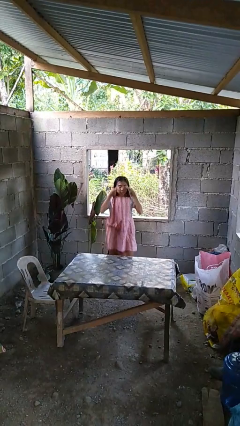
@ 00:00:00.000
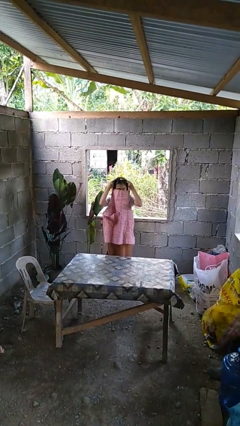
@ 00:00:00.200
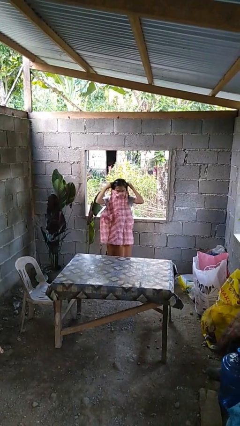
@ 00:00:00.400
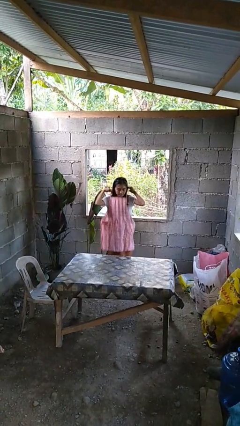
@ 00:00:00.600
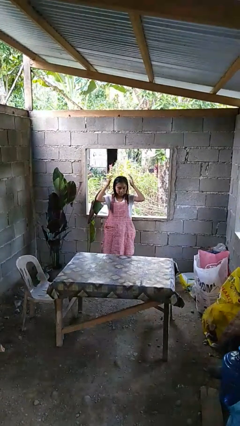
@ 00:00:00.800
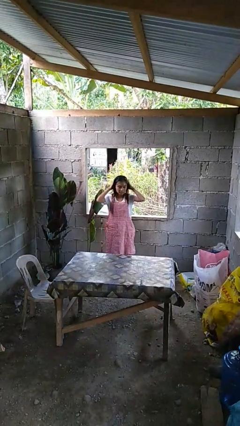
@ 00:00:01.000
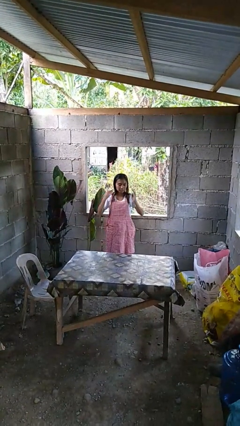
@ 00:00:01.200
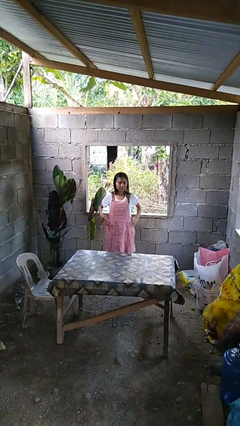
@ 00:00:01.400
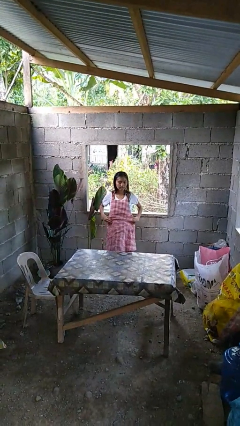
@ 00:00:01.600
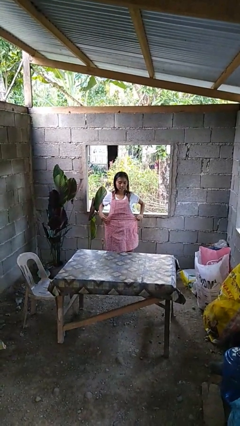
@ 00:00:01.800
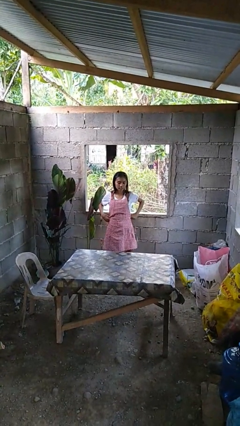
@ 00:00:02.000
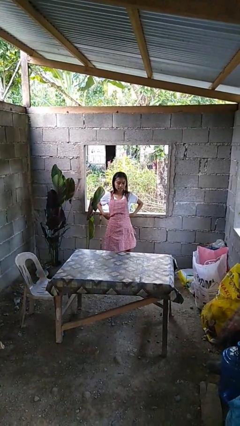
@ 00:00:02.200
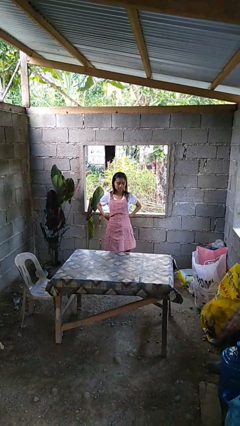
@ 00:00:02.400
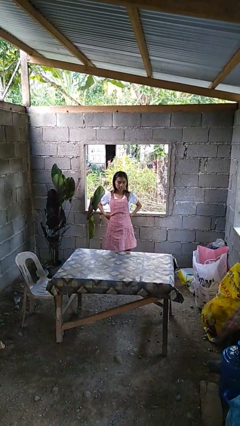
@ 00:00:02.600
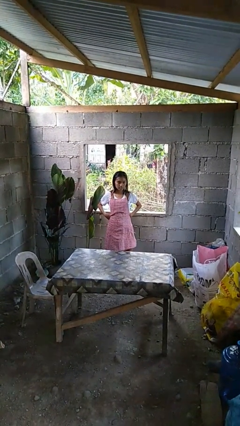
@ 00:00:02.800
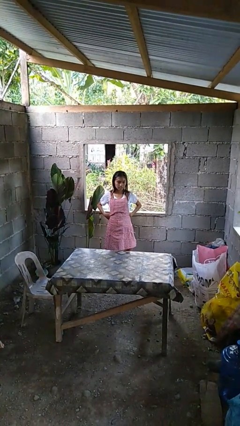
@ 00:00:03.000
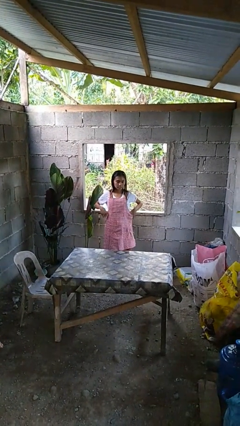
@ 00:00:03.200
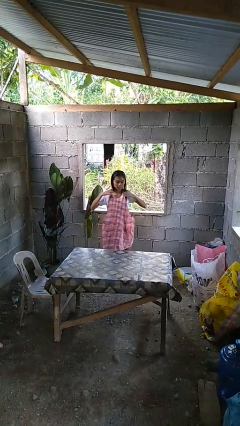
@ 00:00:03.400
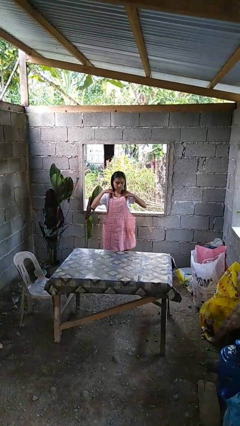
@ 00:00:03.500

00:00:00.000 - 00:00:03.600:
person puts on apron

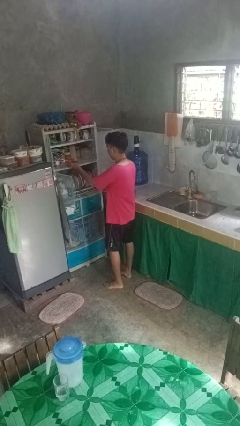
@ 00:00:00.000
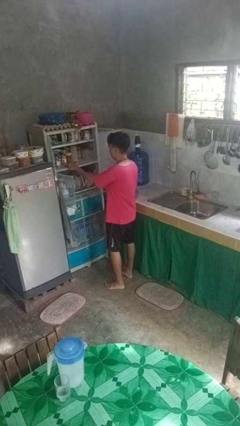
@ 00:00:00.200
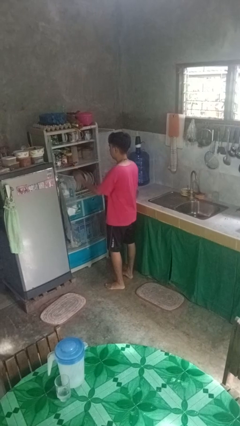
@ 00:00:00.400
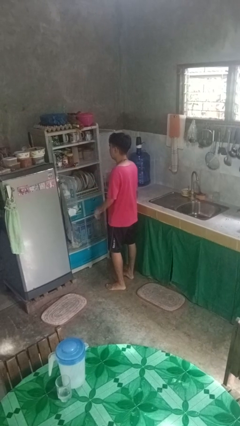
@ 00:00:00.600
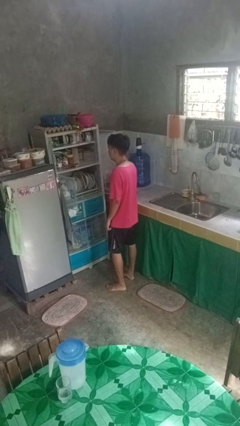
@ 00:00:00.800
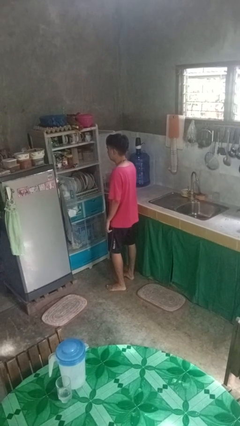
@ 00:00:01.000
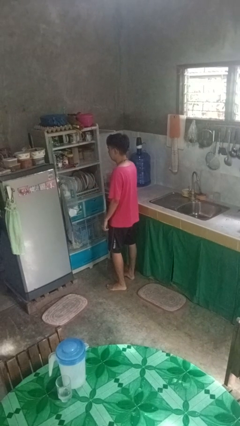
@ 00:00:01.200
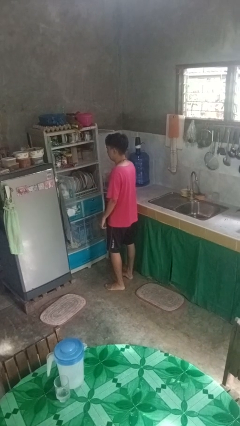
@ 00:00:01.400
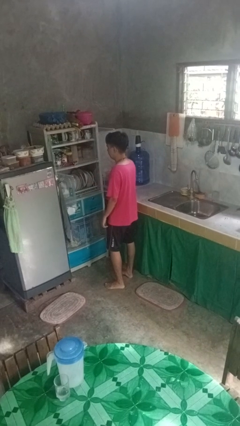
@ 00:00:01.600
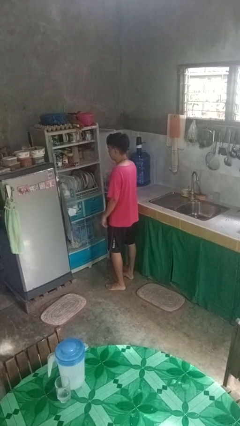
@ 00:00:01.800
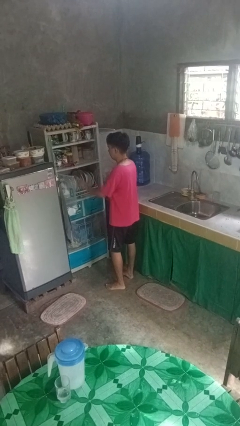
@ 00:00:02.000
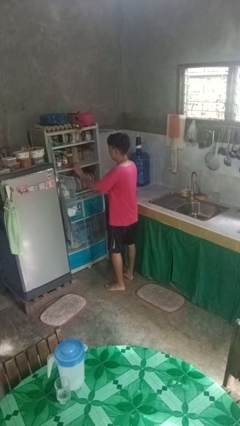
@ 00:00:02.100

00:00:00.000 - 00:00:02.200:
person puts object in cabinet

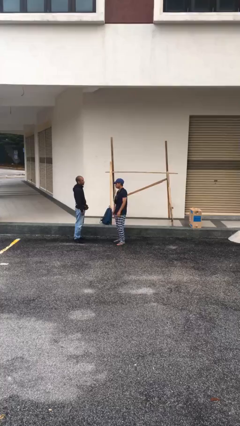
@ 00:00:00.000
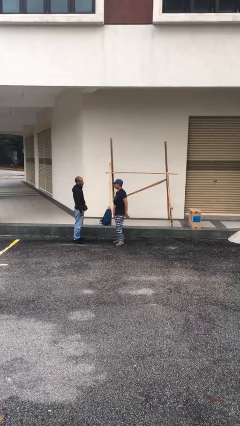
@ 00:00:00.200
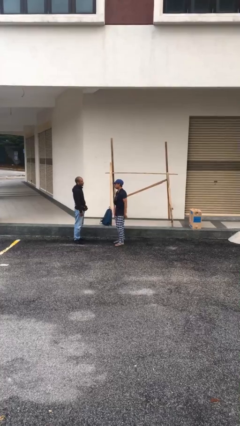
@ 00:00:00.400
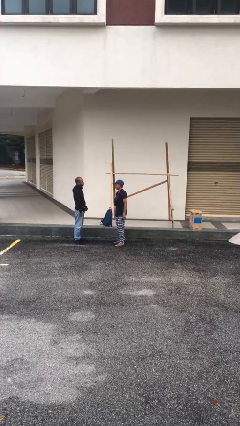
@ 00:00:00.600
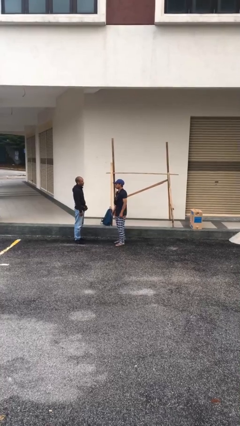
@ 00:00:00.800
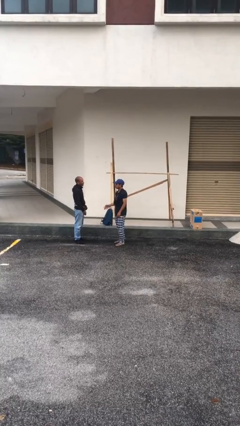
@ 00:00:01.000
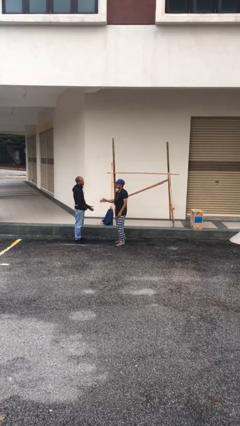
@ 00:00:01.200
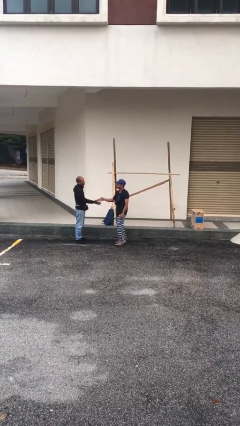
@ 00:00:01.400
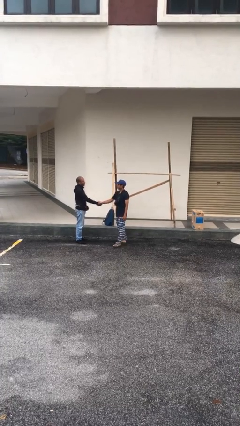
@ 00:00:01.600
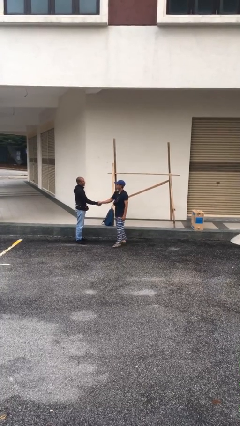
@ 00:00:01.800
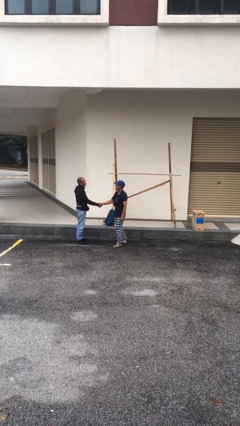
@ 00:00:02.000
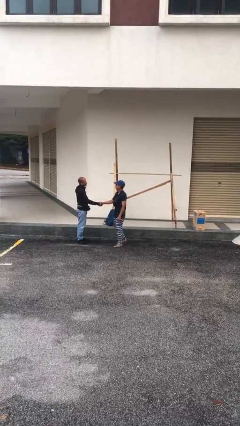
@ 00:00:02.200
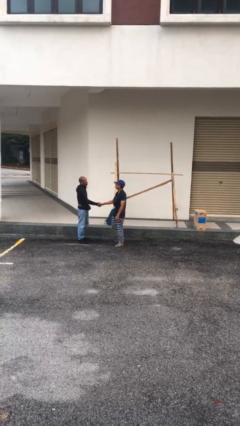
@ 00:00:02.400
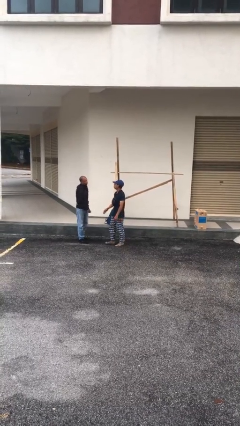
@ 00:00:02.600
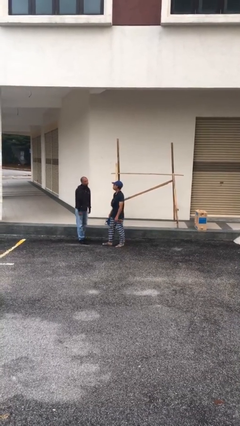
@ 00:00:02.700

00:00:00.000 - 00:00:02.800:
person shakes hand

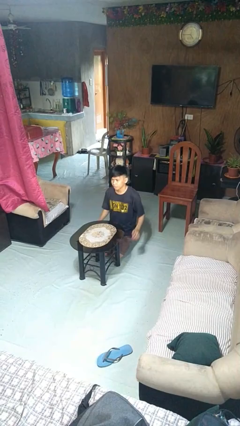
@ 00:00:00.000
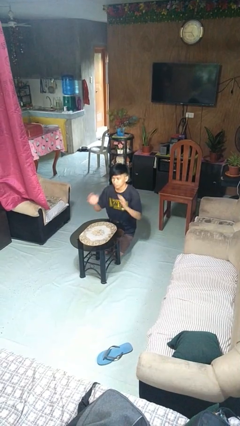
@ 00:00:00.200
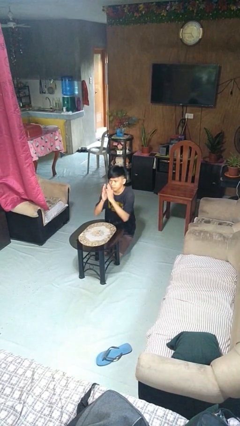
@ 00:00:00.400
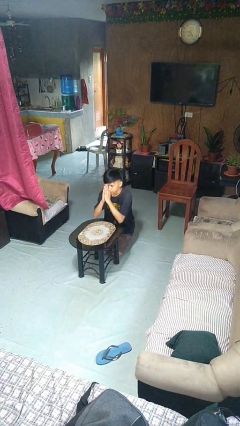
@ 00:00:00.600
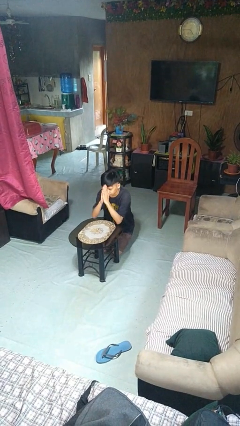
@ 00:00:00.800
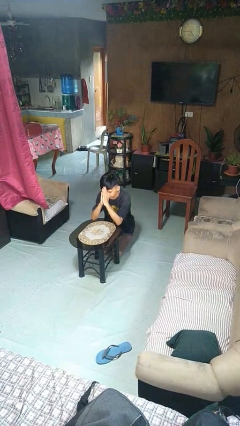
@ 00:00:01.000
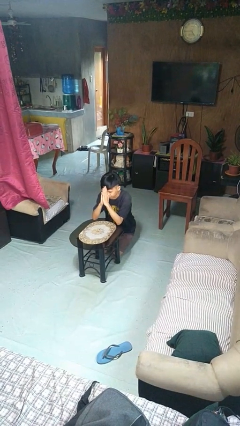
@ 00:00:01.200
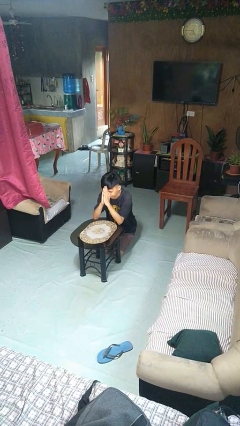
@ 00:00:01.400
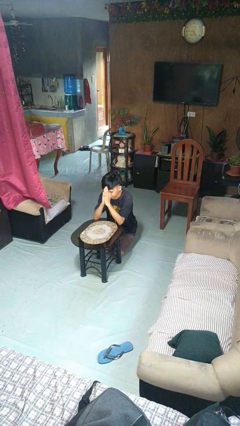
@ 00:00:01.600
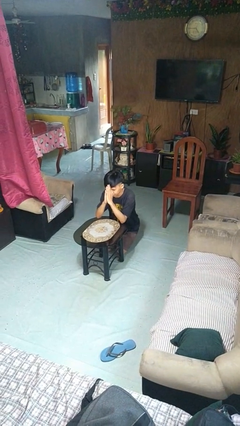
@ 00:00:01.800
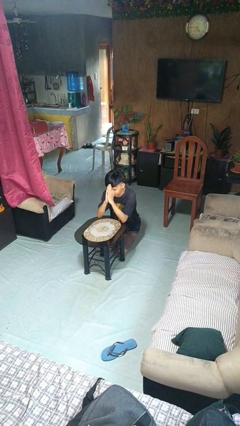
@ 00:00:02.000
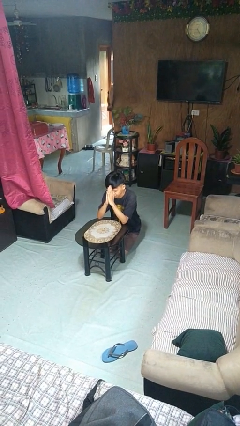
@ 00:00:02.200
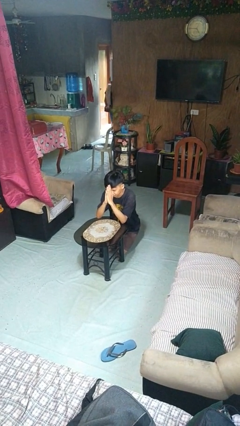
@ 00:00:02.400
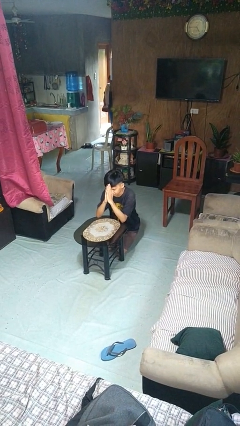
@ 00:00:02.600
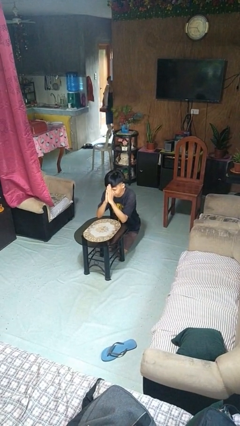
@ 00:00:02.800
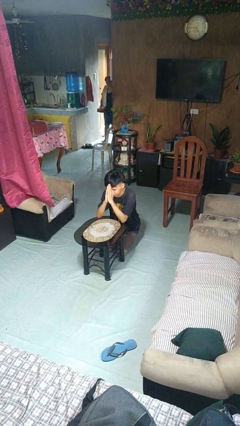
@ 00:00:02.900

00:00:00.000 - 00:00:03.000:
person prays

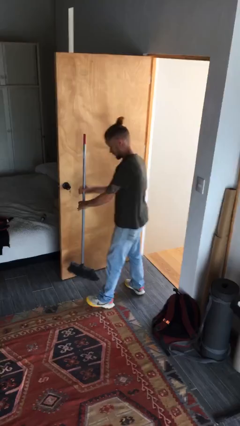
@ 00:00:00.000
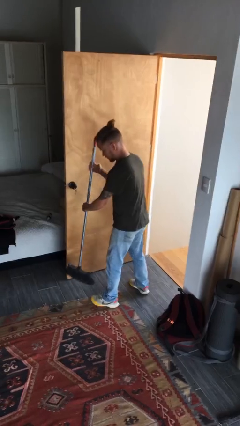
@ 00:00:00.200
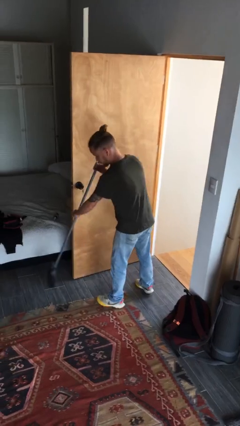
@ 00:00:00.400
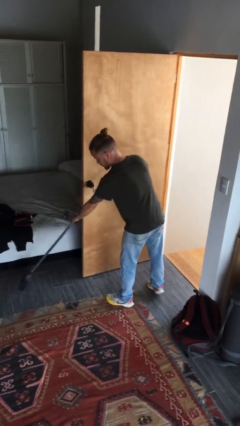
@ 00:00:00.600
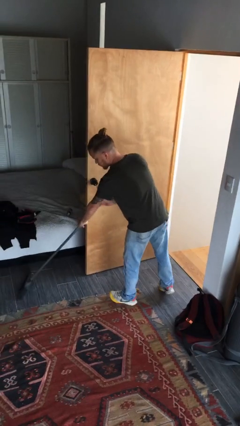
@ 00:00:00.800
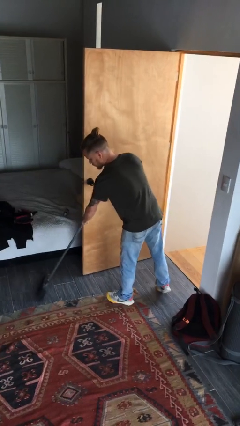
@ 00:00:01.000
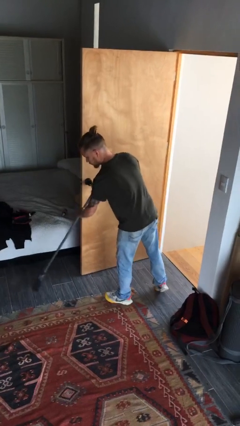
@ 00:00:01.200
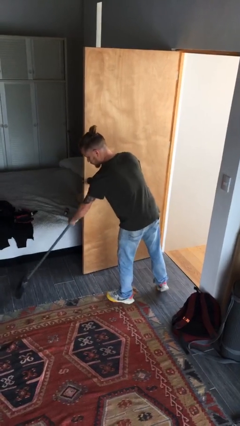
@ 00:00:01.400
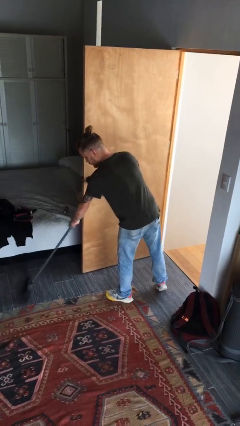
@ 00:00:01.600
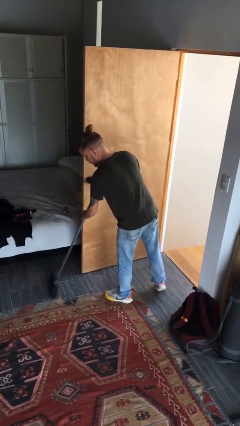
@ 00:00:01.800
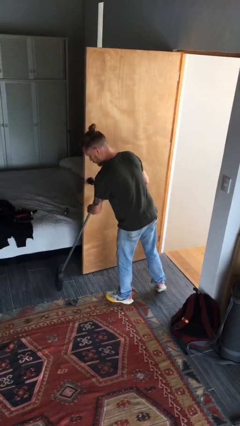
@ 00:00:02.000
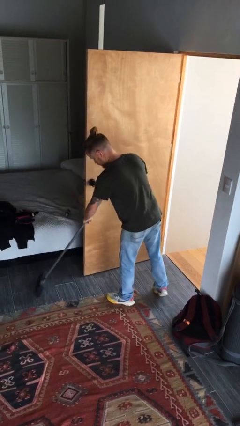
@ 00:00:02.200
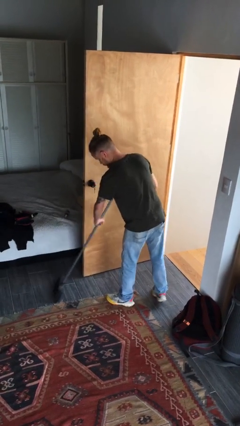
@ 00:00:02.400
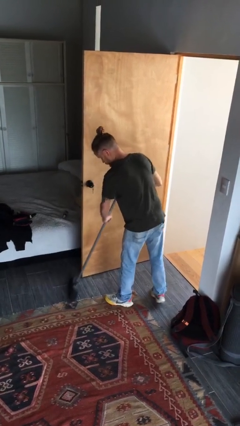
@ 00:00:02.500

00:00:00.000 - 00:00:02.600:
person sweeps floor

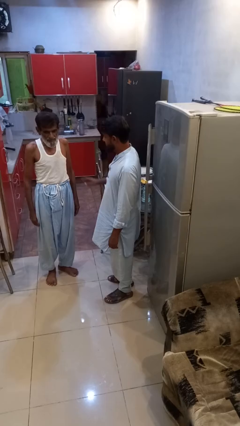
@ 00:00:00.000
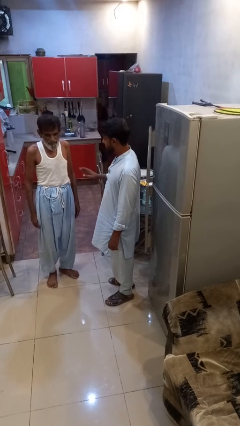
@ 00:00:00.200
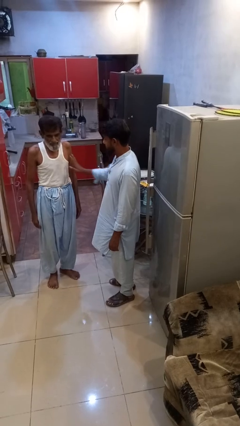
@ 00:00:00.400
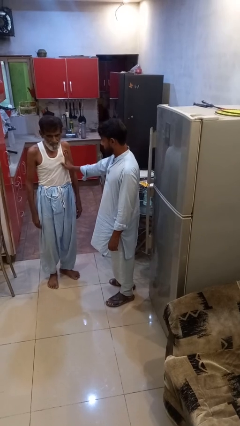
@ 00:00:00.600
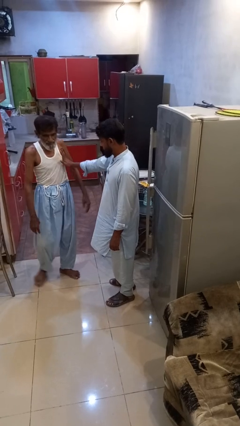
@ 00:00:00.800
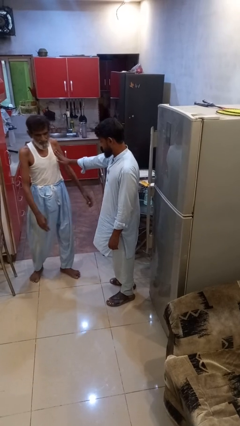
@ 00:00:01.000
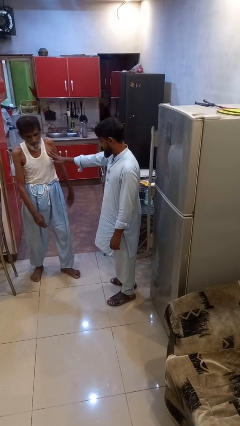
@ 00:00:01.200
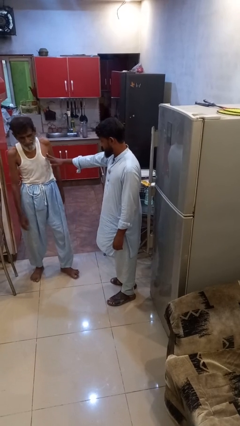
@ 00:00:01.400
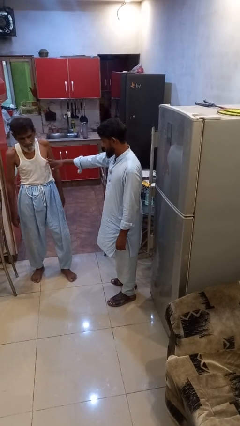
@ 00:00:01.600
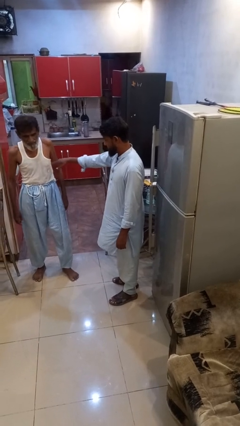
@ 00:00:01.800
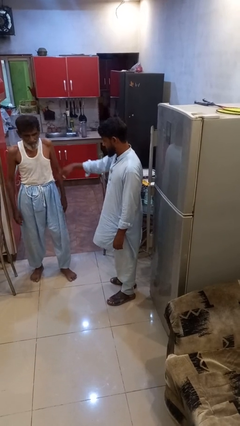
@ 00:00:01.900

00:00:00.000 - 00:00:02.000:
person shoves person

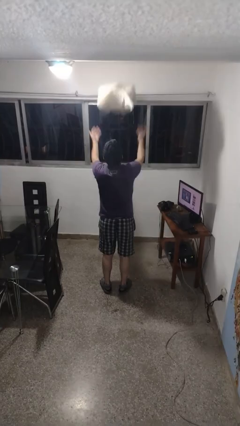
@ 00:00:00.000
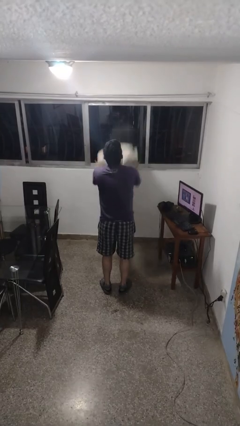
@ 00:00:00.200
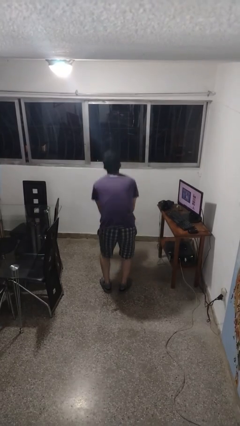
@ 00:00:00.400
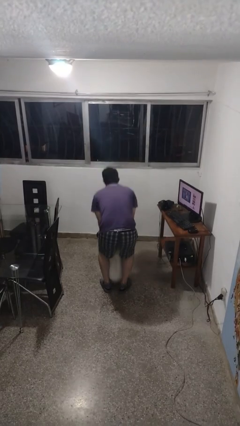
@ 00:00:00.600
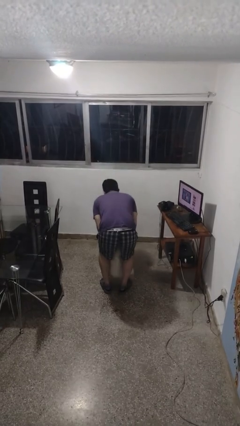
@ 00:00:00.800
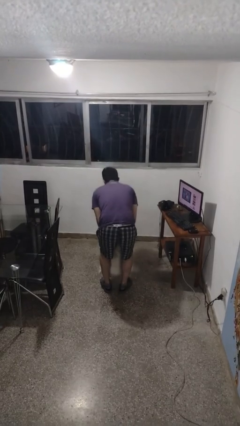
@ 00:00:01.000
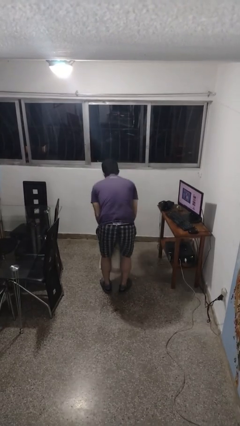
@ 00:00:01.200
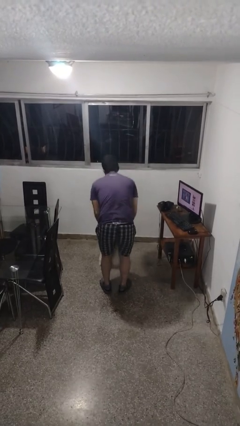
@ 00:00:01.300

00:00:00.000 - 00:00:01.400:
person catches dropped object
